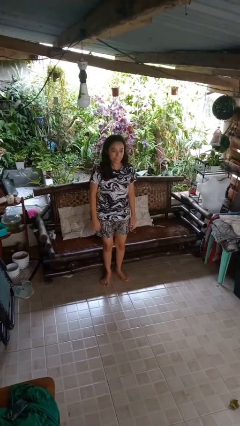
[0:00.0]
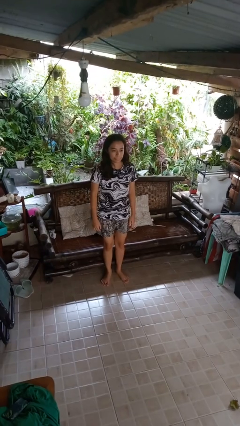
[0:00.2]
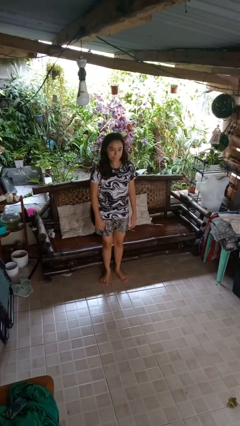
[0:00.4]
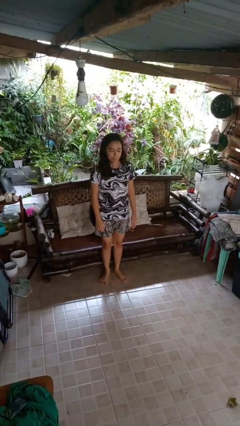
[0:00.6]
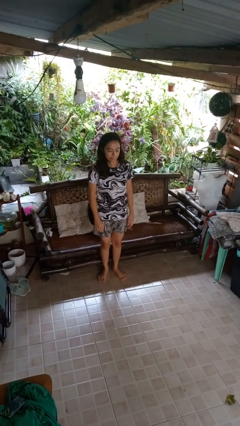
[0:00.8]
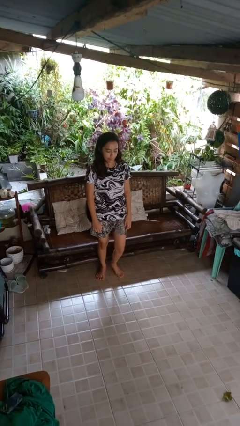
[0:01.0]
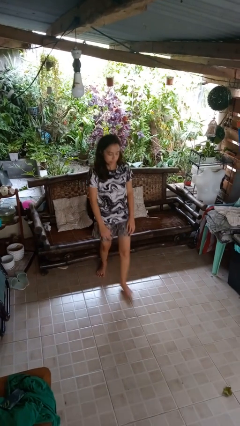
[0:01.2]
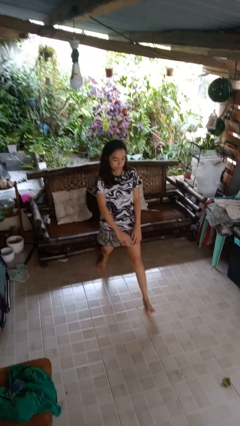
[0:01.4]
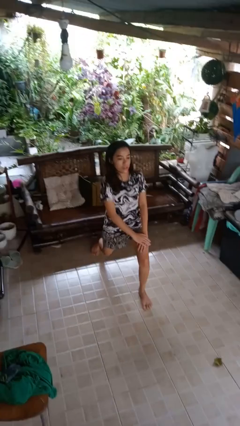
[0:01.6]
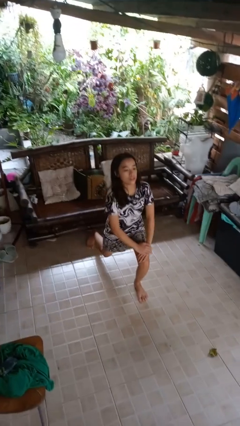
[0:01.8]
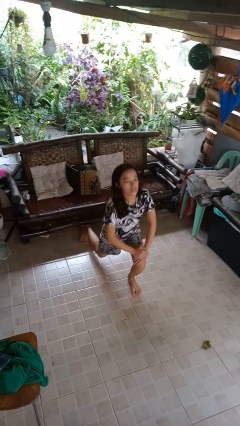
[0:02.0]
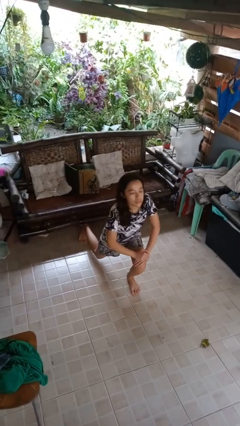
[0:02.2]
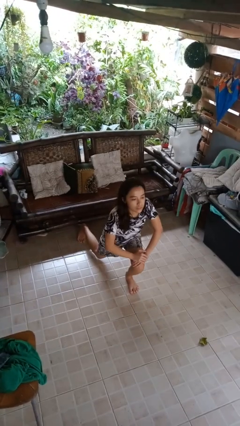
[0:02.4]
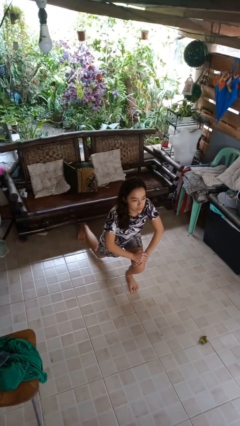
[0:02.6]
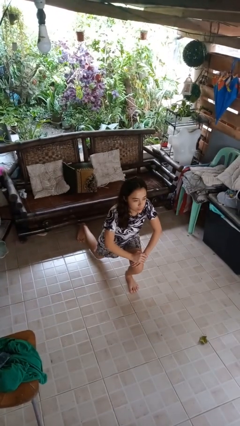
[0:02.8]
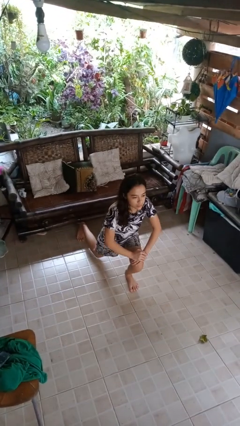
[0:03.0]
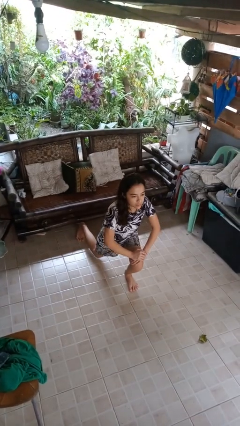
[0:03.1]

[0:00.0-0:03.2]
person exercises with lunges

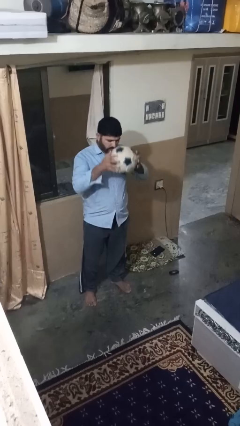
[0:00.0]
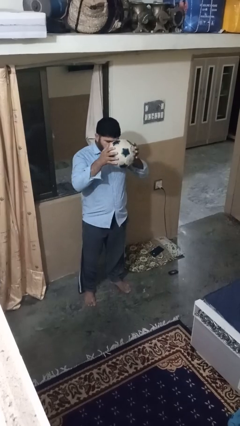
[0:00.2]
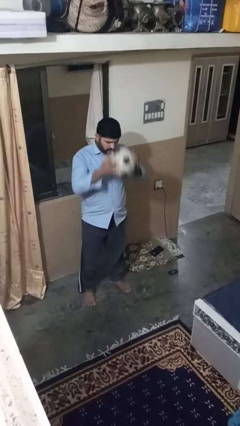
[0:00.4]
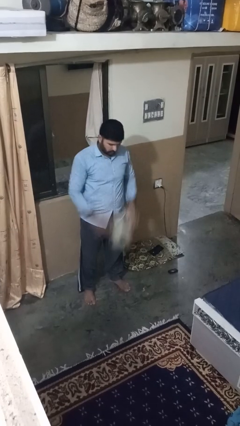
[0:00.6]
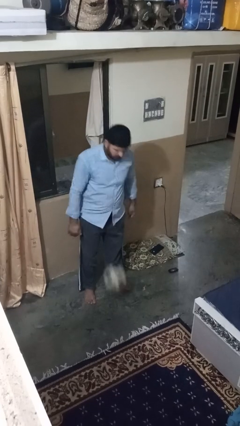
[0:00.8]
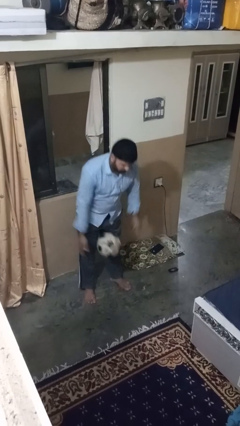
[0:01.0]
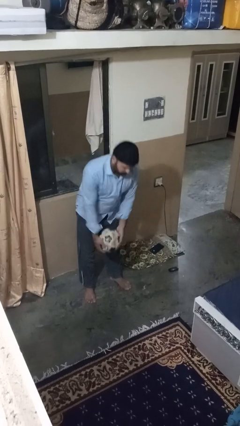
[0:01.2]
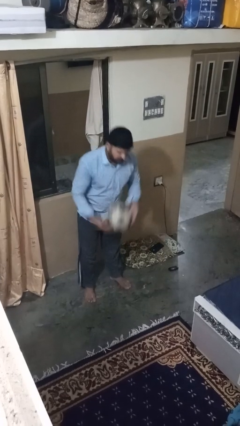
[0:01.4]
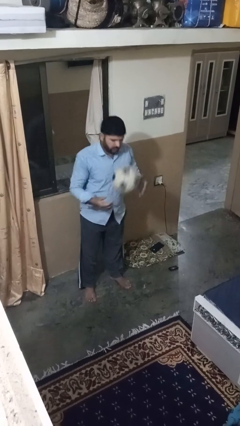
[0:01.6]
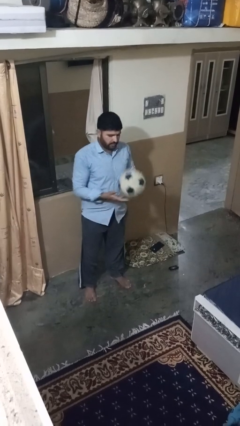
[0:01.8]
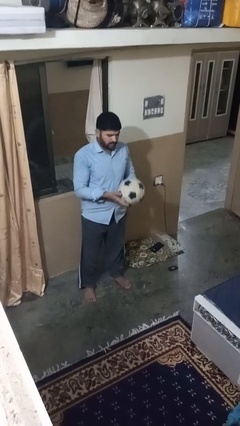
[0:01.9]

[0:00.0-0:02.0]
person bounces ball on floor

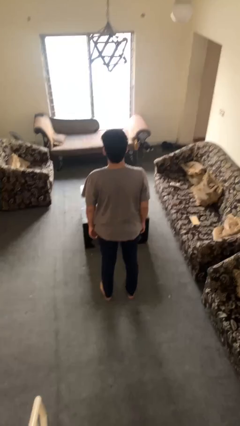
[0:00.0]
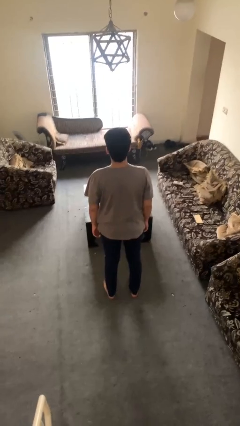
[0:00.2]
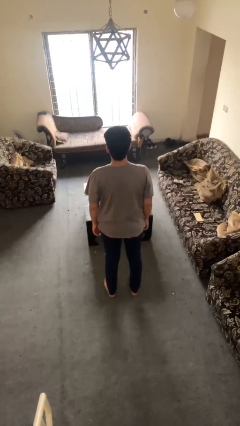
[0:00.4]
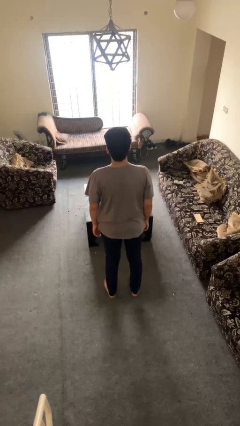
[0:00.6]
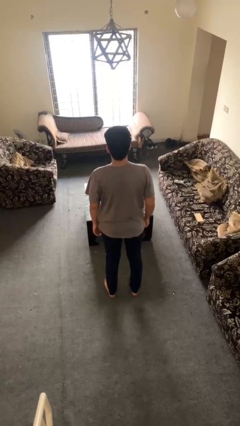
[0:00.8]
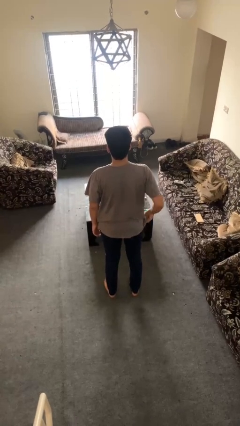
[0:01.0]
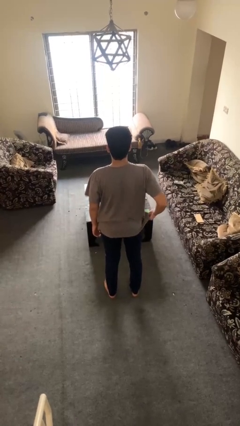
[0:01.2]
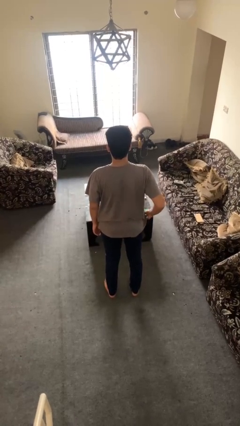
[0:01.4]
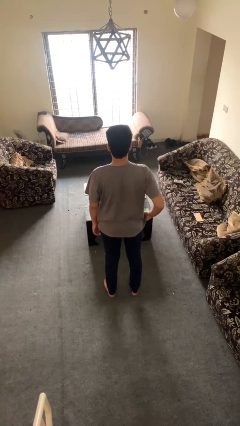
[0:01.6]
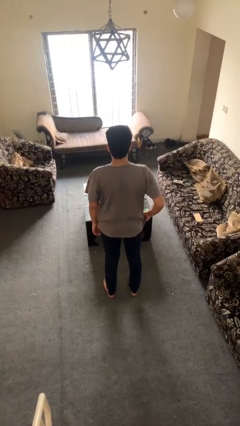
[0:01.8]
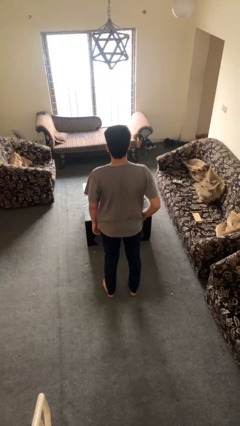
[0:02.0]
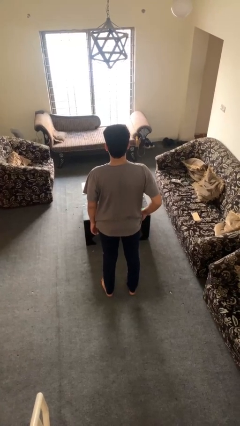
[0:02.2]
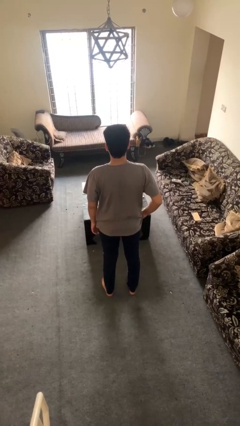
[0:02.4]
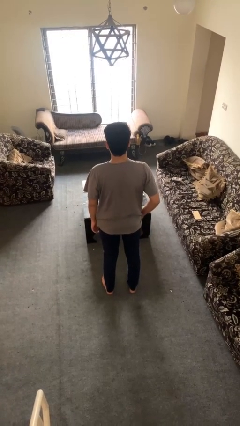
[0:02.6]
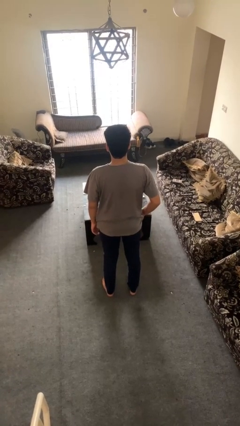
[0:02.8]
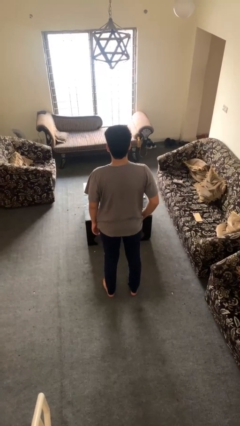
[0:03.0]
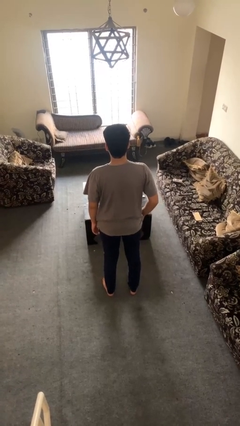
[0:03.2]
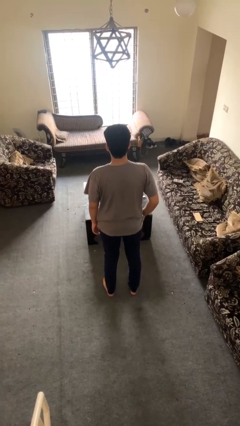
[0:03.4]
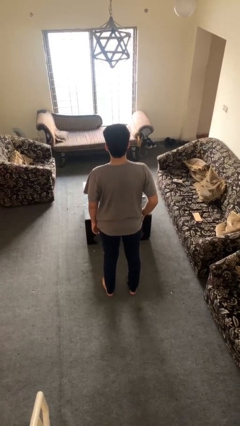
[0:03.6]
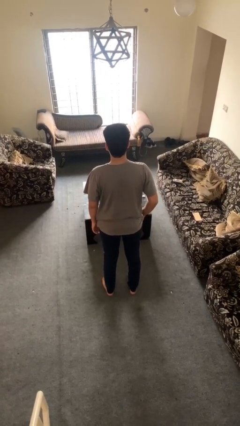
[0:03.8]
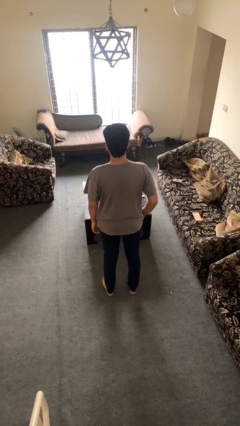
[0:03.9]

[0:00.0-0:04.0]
person puts hands in back pockets

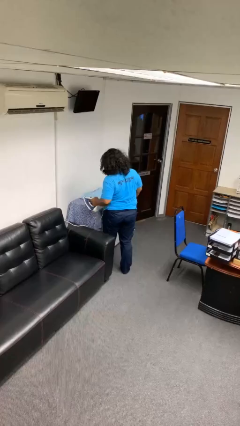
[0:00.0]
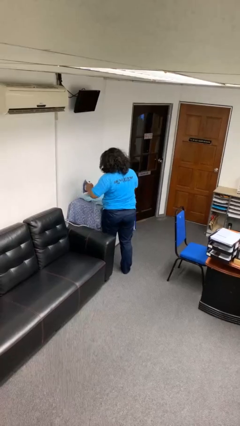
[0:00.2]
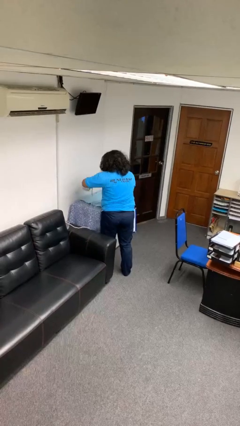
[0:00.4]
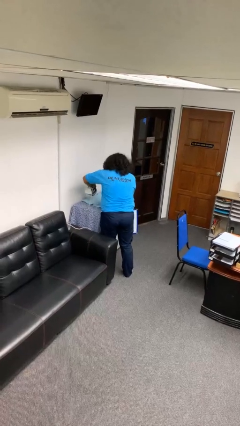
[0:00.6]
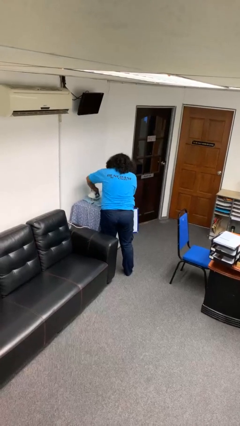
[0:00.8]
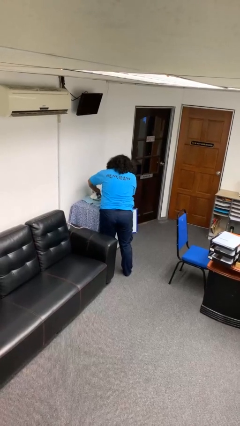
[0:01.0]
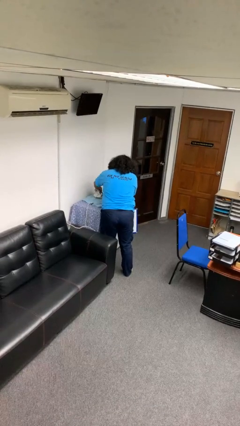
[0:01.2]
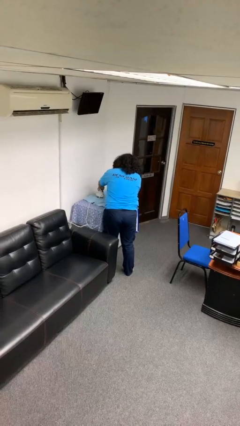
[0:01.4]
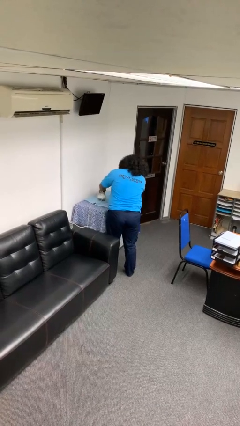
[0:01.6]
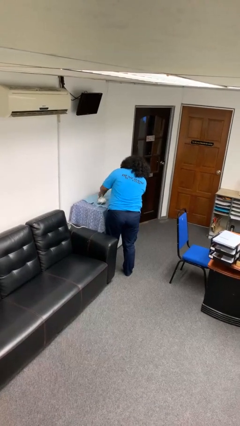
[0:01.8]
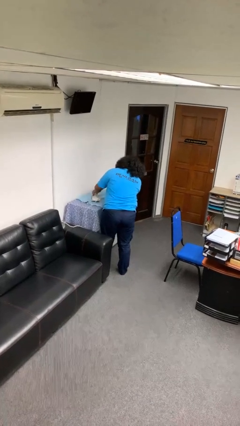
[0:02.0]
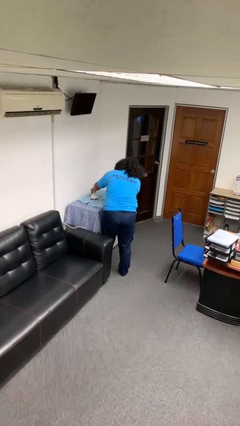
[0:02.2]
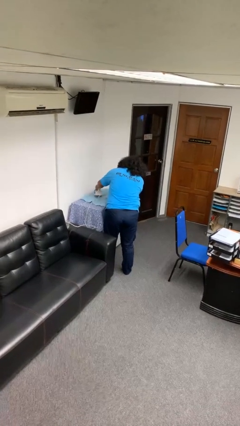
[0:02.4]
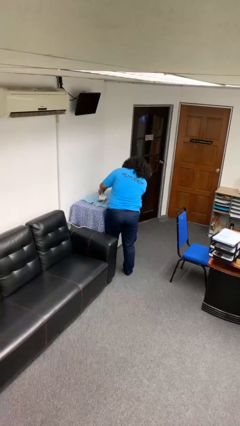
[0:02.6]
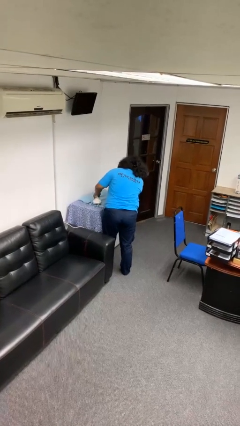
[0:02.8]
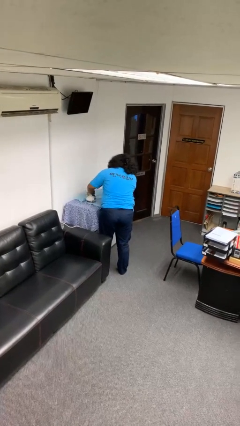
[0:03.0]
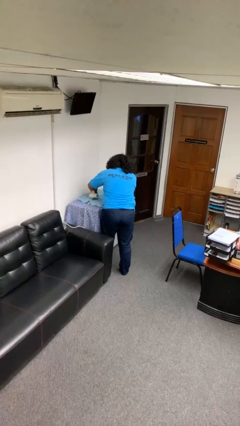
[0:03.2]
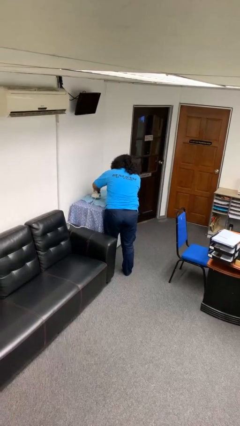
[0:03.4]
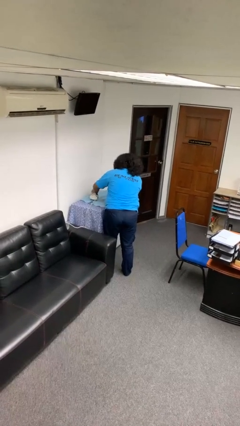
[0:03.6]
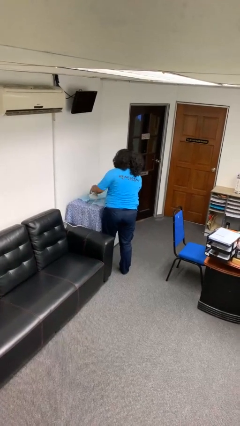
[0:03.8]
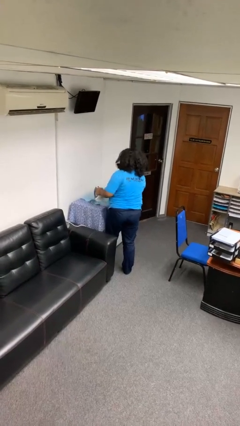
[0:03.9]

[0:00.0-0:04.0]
person irons clothes

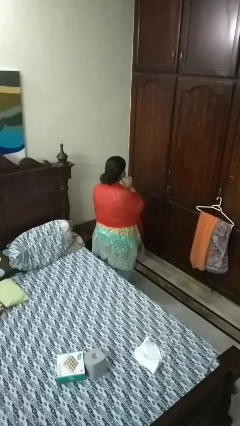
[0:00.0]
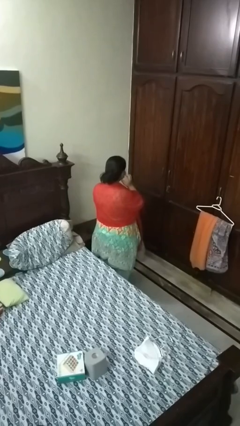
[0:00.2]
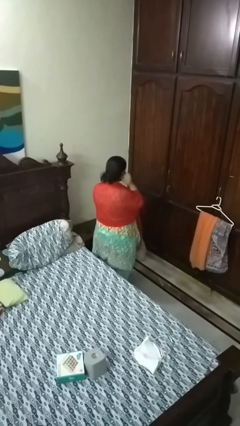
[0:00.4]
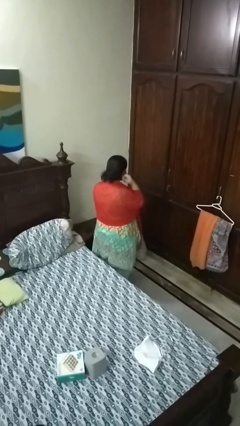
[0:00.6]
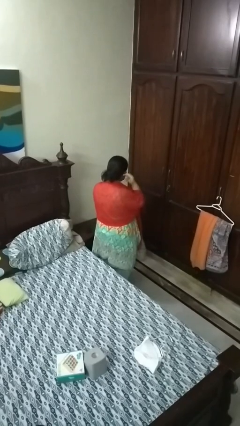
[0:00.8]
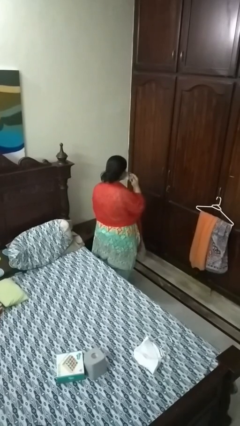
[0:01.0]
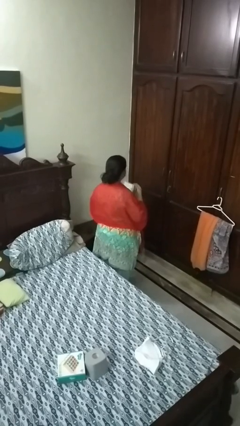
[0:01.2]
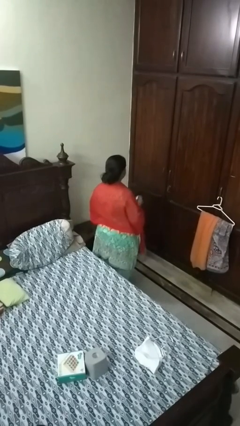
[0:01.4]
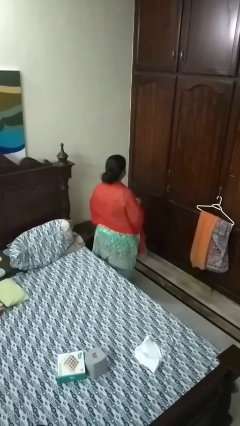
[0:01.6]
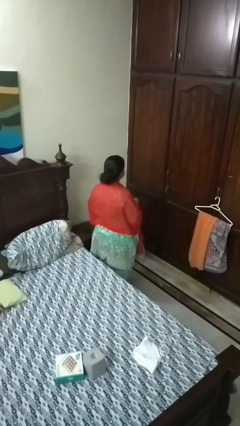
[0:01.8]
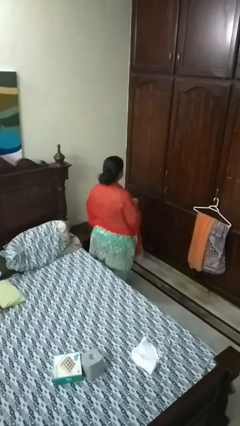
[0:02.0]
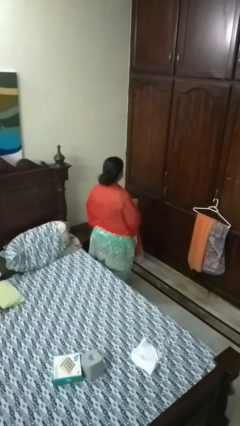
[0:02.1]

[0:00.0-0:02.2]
person takes off facemask

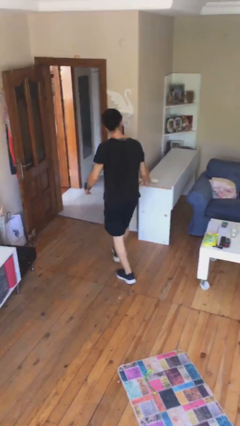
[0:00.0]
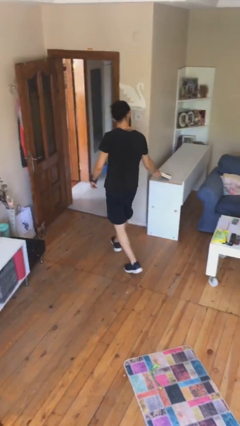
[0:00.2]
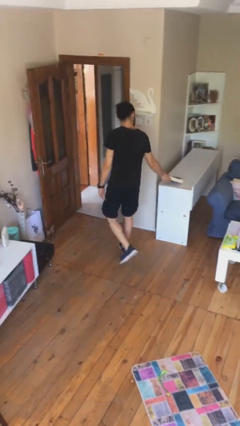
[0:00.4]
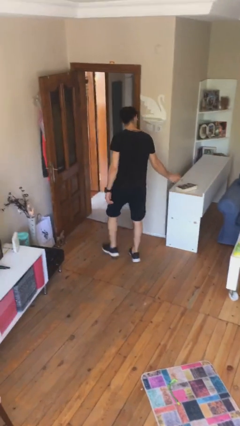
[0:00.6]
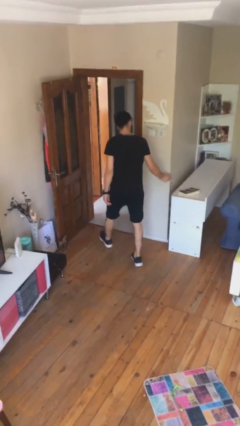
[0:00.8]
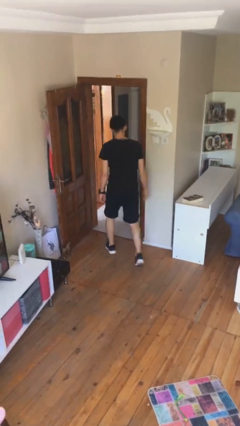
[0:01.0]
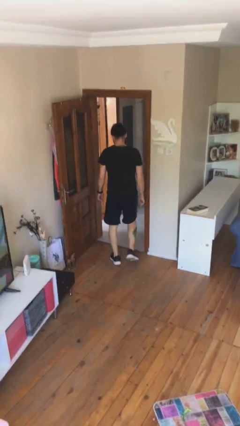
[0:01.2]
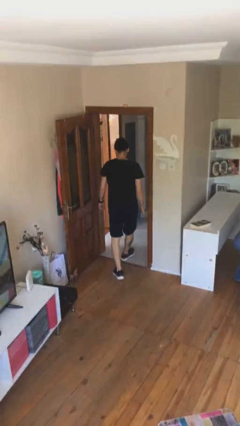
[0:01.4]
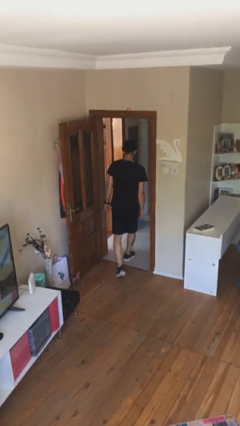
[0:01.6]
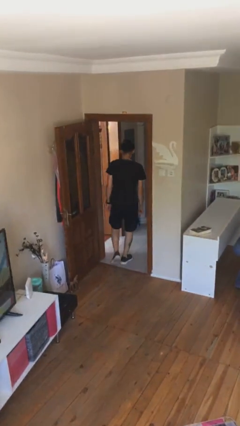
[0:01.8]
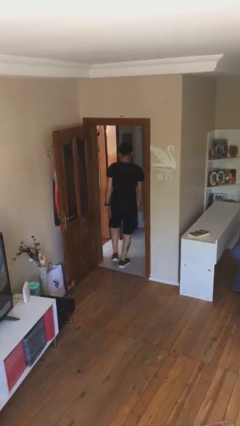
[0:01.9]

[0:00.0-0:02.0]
person puts down object on table
